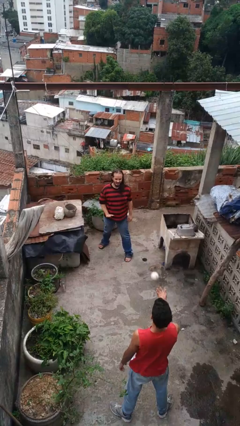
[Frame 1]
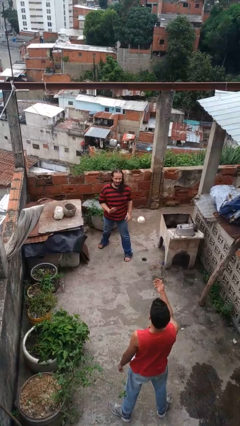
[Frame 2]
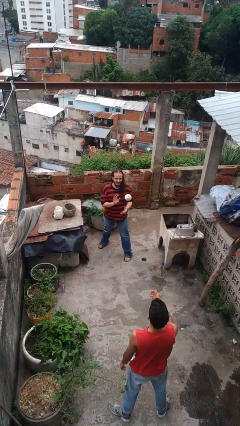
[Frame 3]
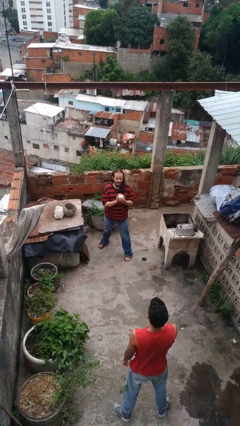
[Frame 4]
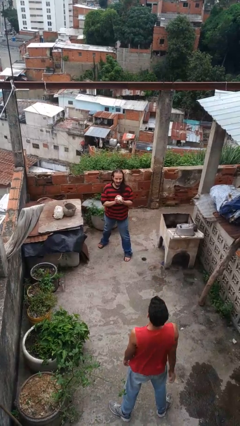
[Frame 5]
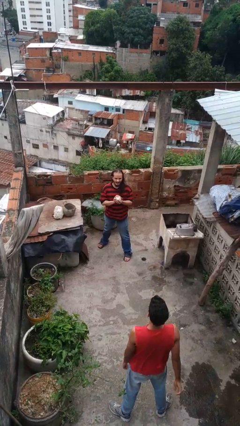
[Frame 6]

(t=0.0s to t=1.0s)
person catches object from person

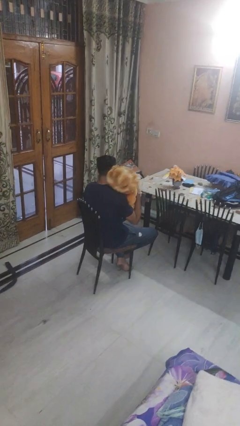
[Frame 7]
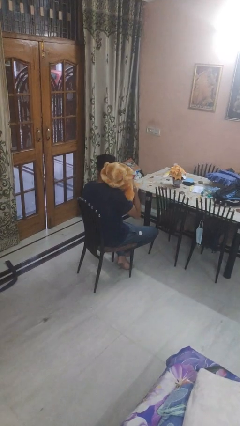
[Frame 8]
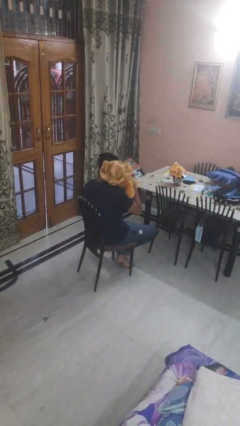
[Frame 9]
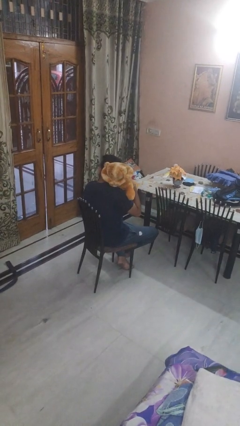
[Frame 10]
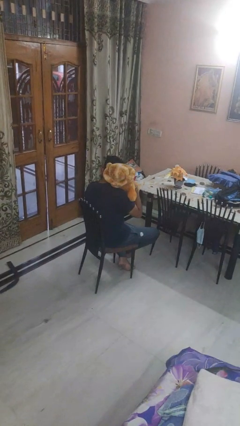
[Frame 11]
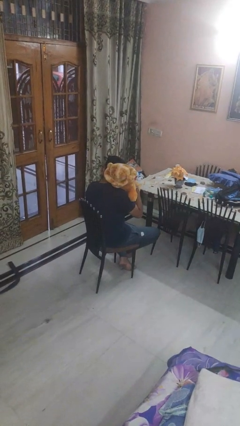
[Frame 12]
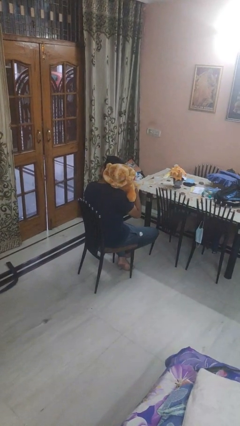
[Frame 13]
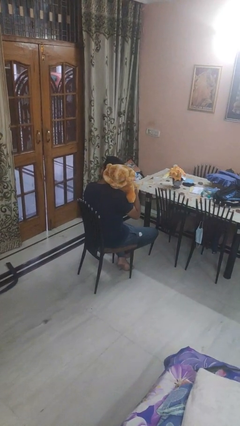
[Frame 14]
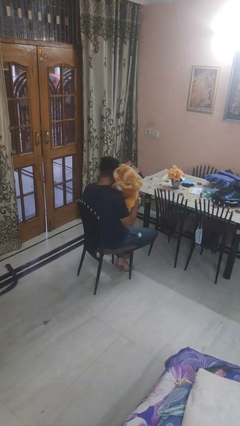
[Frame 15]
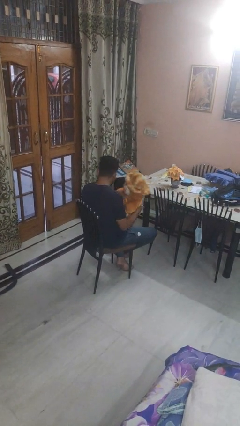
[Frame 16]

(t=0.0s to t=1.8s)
person hugs stuffed animal

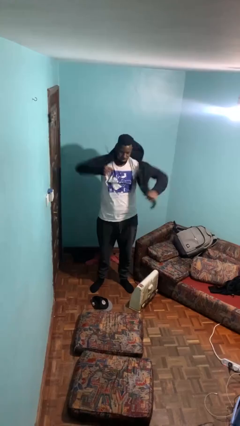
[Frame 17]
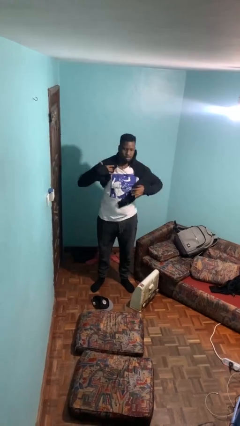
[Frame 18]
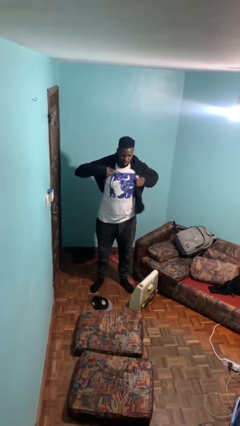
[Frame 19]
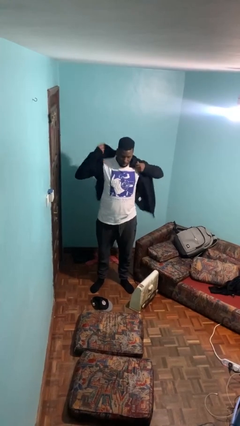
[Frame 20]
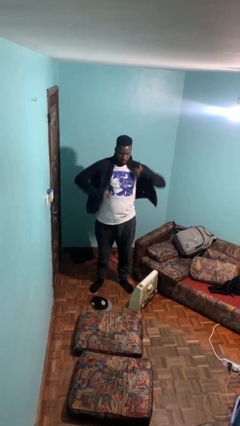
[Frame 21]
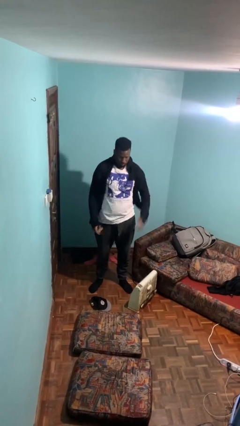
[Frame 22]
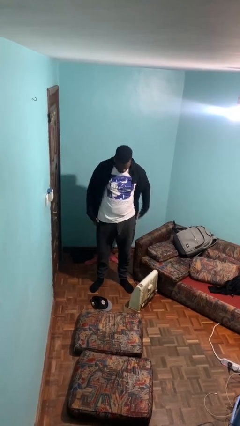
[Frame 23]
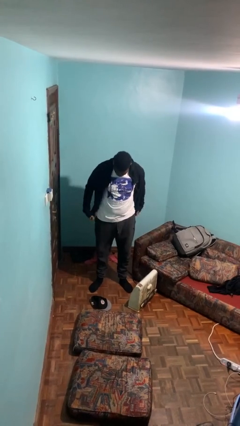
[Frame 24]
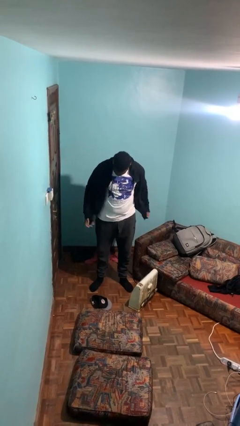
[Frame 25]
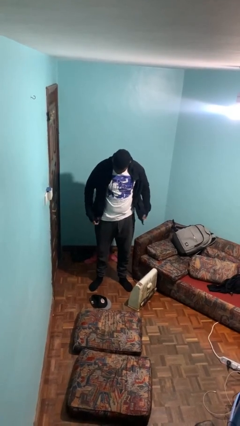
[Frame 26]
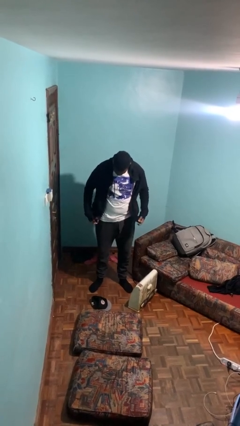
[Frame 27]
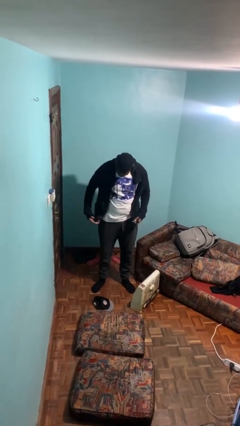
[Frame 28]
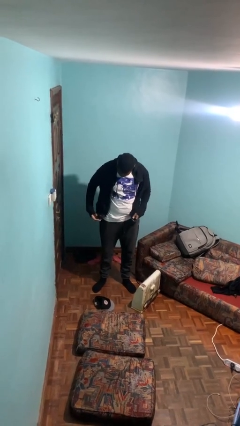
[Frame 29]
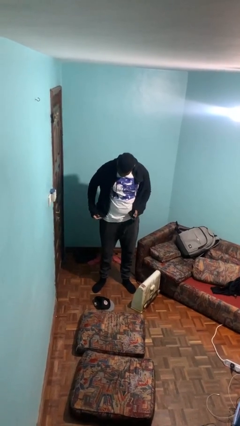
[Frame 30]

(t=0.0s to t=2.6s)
person puts on jacket

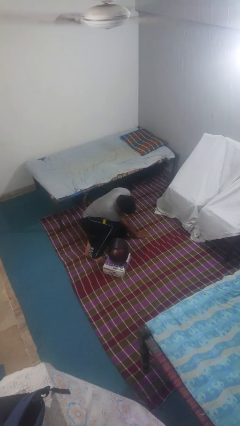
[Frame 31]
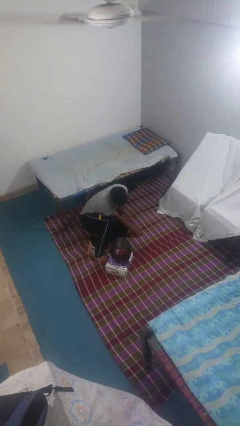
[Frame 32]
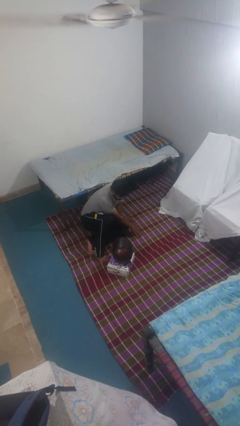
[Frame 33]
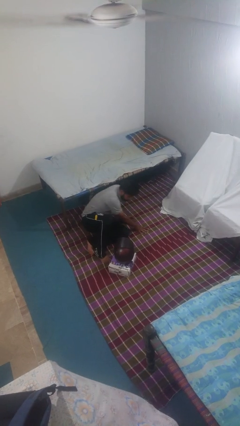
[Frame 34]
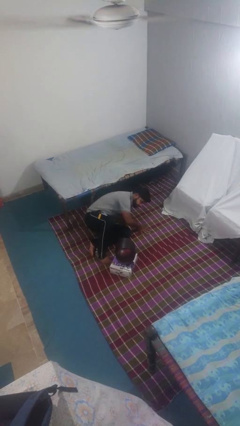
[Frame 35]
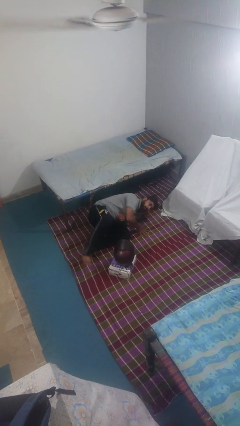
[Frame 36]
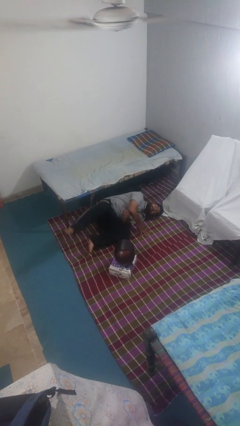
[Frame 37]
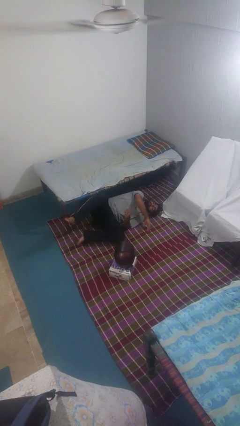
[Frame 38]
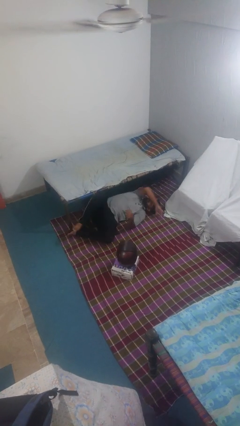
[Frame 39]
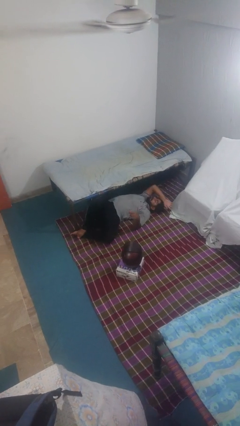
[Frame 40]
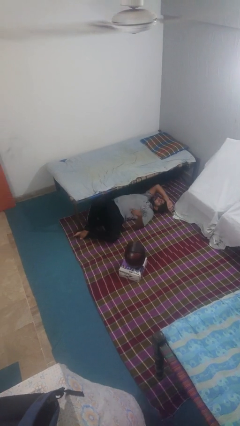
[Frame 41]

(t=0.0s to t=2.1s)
person lies down on floor

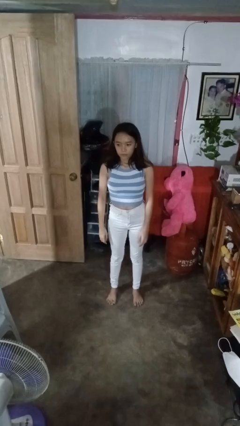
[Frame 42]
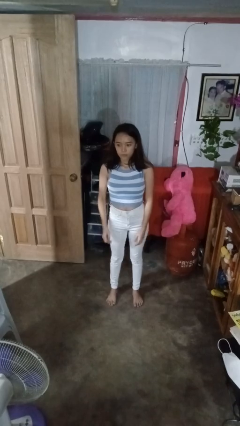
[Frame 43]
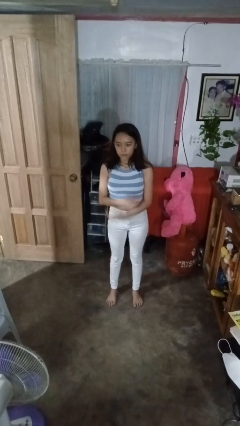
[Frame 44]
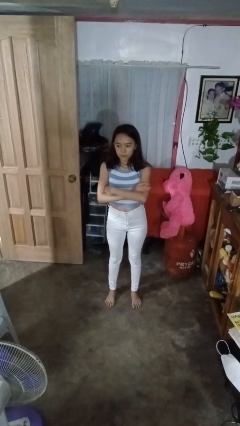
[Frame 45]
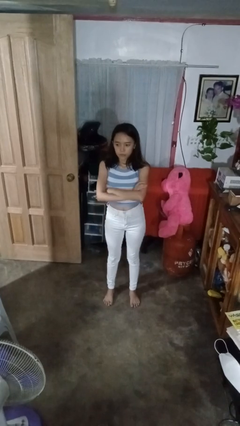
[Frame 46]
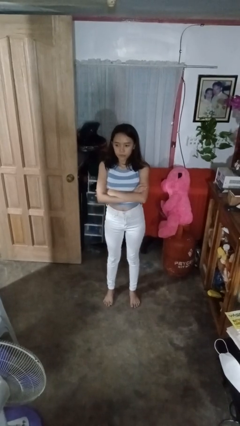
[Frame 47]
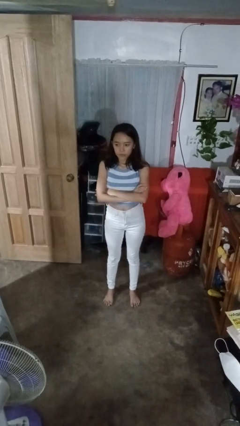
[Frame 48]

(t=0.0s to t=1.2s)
person crosses arms

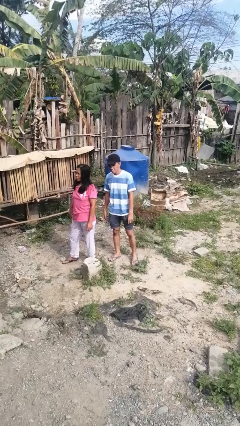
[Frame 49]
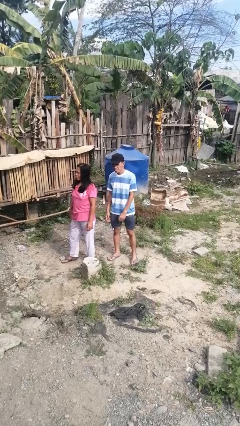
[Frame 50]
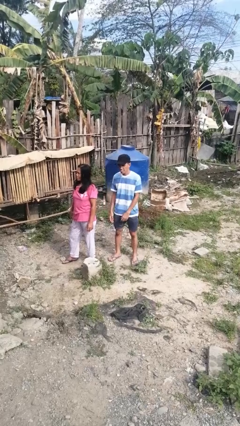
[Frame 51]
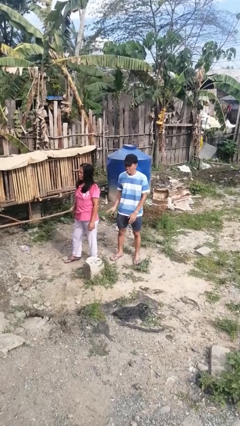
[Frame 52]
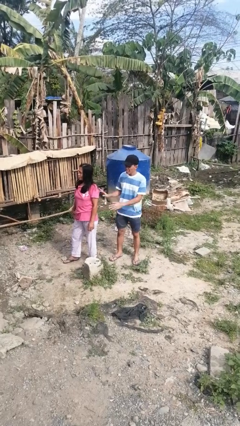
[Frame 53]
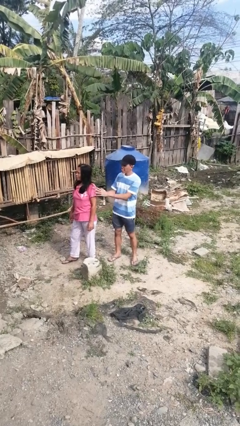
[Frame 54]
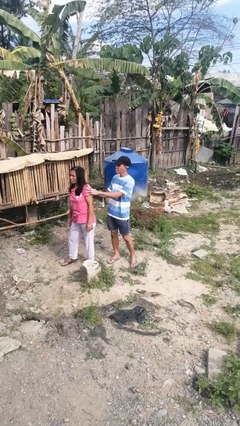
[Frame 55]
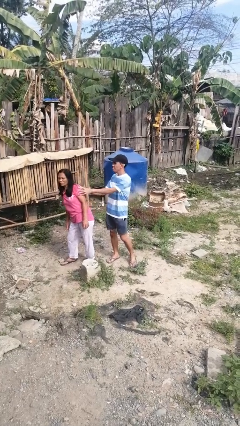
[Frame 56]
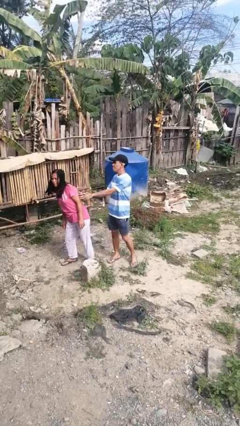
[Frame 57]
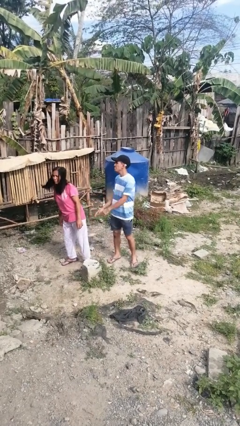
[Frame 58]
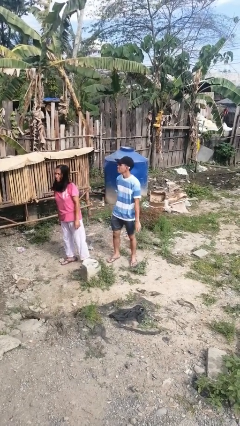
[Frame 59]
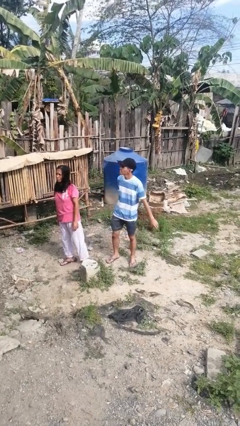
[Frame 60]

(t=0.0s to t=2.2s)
person shoves person

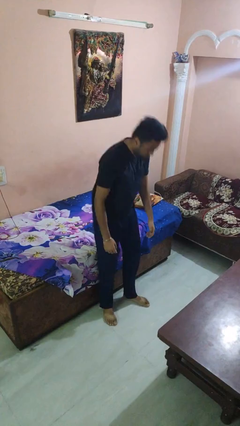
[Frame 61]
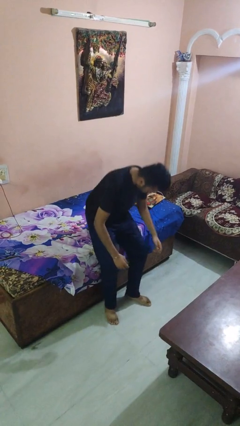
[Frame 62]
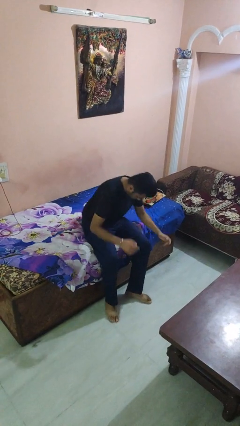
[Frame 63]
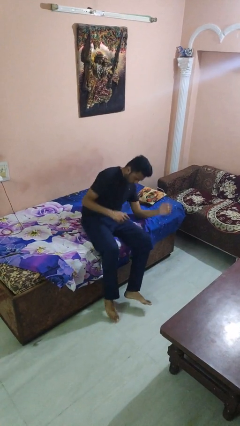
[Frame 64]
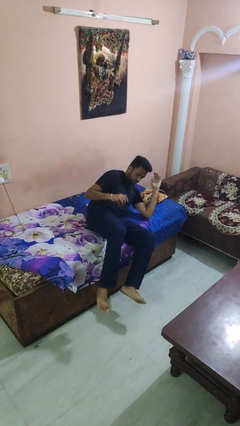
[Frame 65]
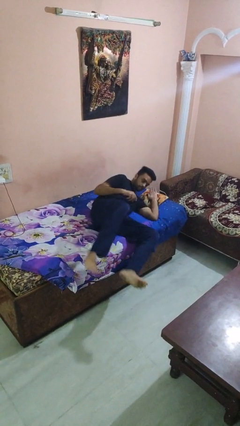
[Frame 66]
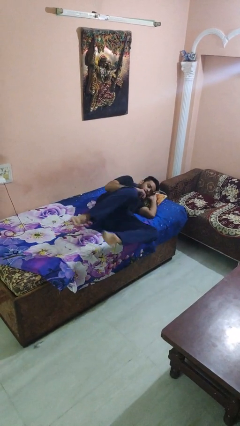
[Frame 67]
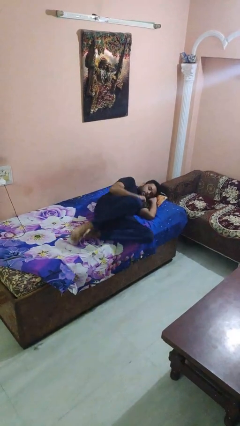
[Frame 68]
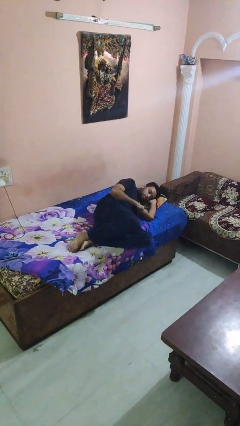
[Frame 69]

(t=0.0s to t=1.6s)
person lies down on bed

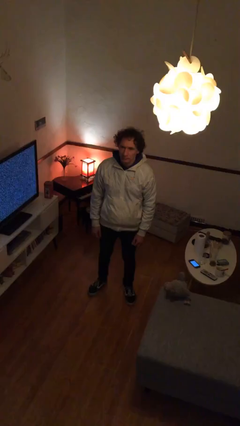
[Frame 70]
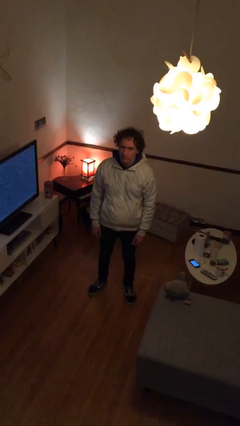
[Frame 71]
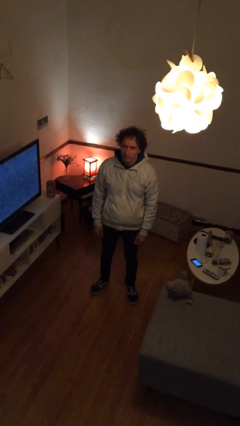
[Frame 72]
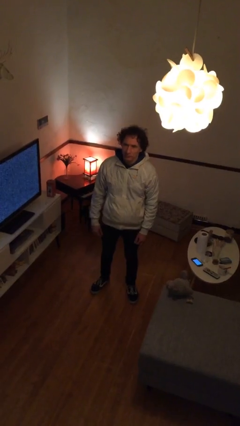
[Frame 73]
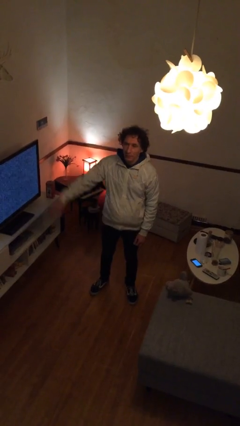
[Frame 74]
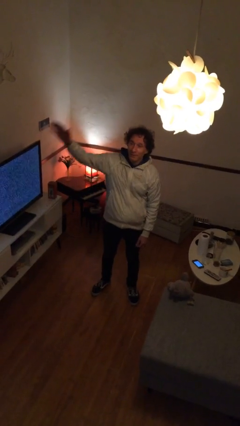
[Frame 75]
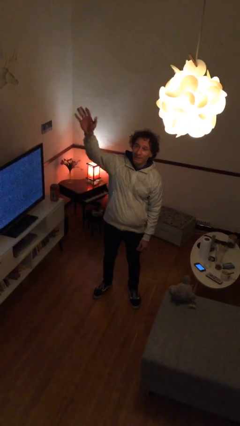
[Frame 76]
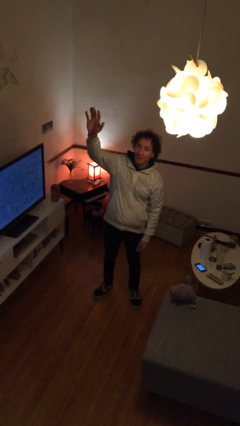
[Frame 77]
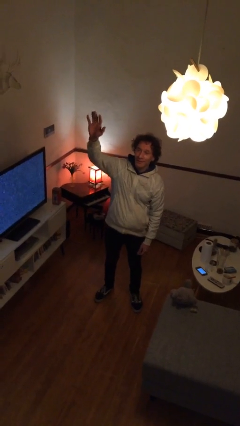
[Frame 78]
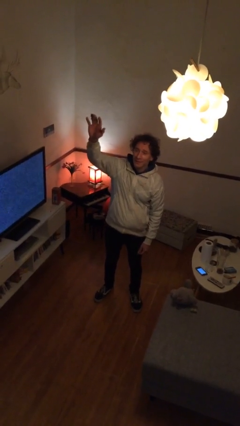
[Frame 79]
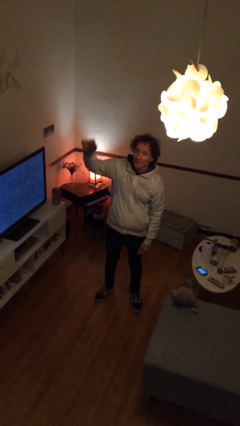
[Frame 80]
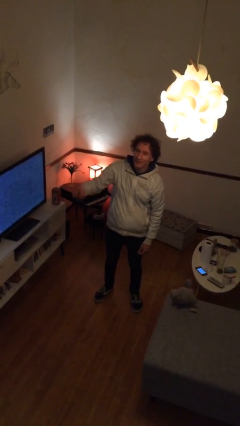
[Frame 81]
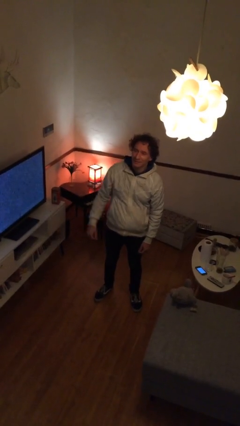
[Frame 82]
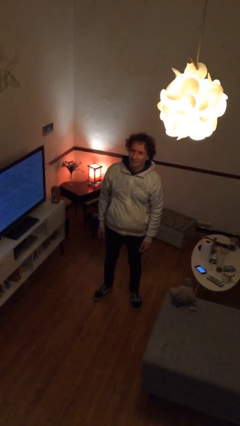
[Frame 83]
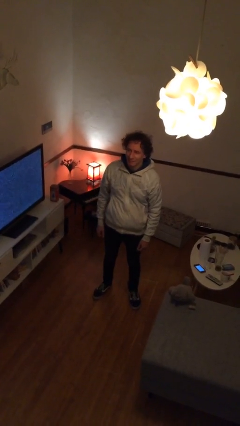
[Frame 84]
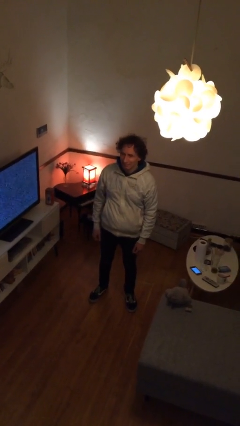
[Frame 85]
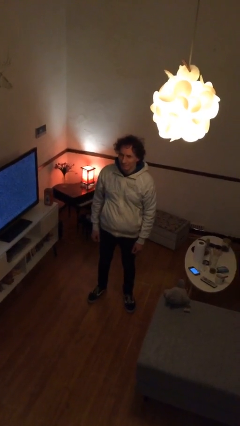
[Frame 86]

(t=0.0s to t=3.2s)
person waves at person

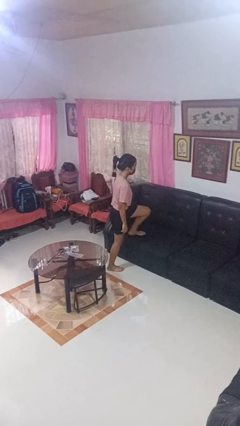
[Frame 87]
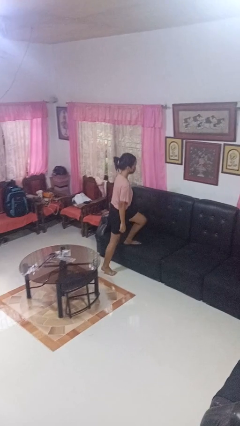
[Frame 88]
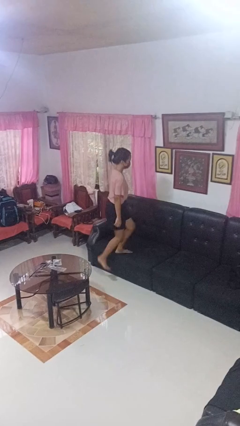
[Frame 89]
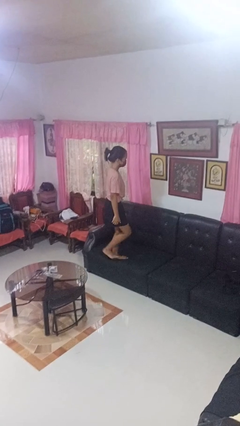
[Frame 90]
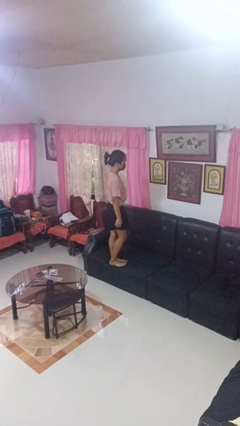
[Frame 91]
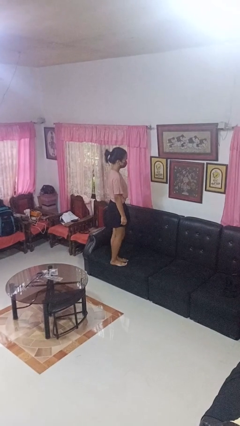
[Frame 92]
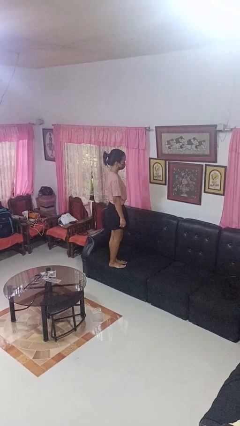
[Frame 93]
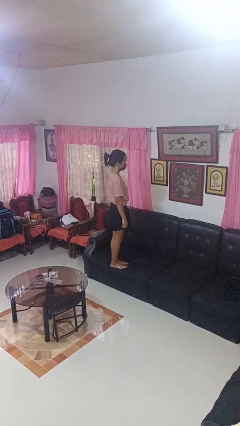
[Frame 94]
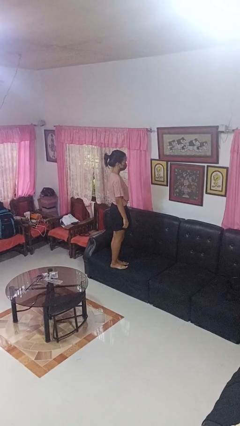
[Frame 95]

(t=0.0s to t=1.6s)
person climbs on couch
